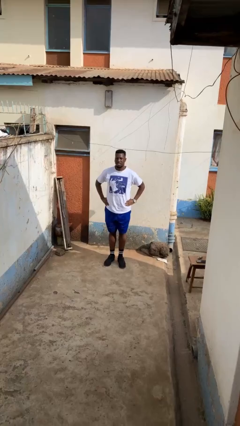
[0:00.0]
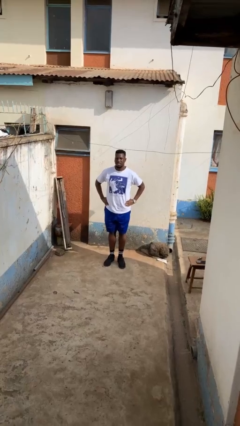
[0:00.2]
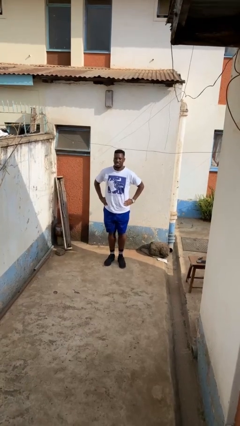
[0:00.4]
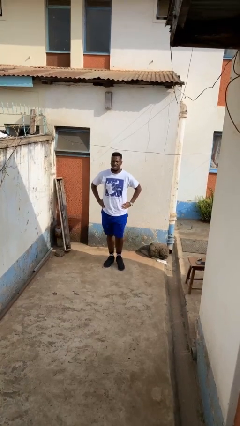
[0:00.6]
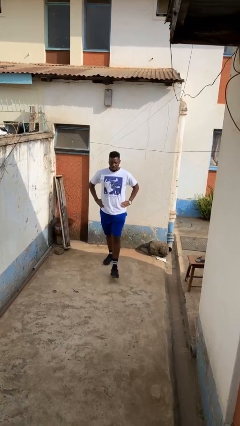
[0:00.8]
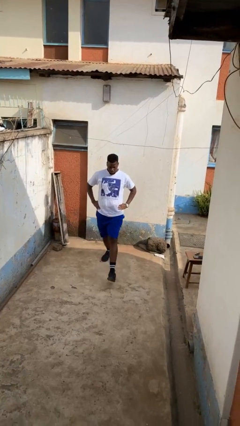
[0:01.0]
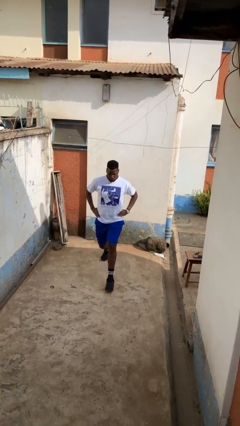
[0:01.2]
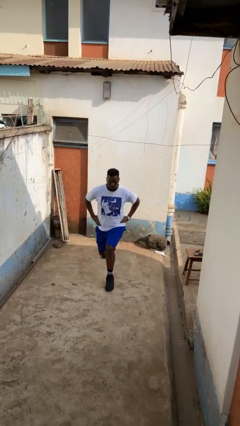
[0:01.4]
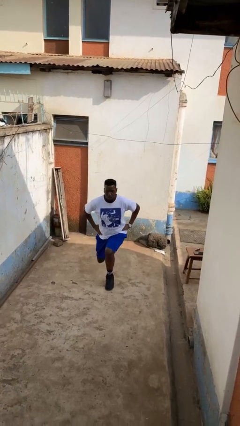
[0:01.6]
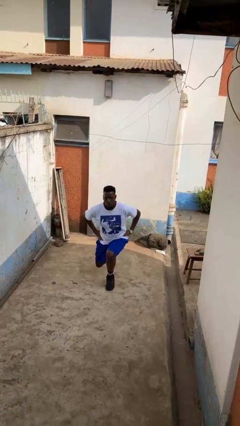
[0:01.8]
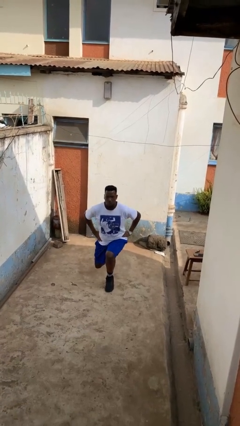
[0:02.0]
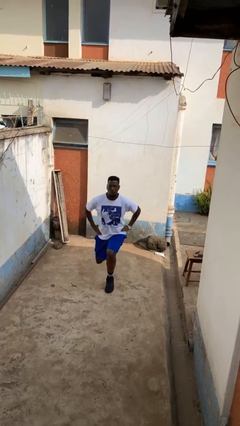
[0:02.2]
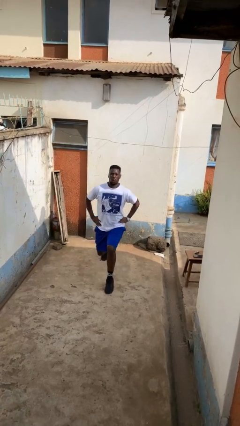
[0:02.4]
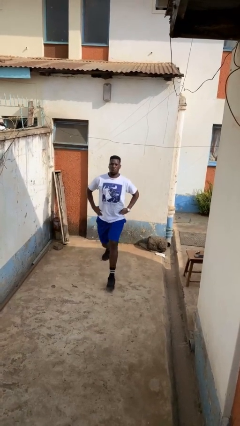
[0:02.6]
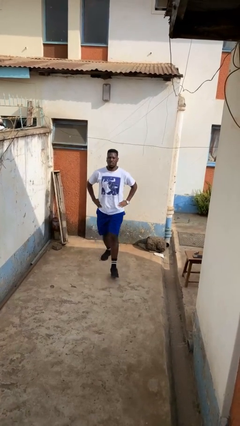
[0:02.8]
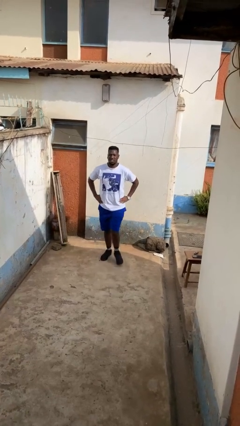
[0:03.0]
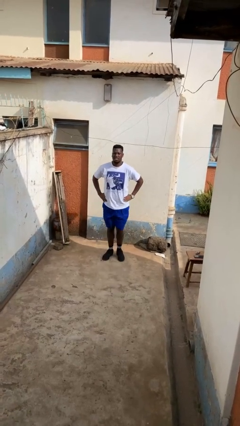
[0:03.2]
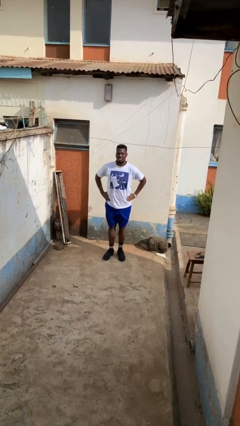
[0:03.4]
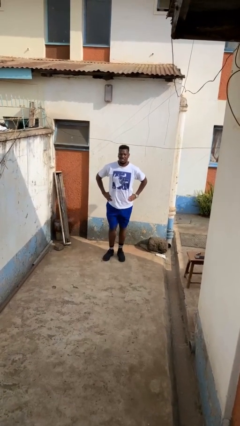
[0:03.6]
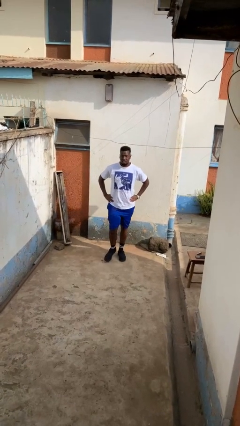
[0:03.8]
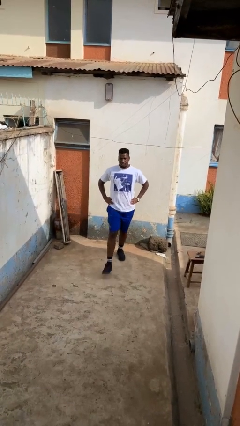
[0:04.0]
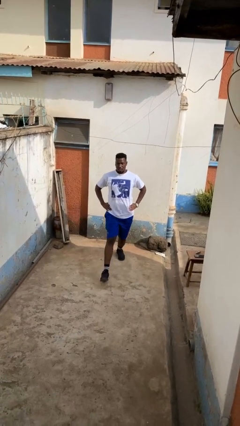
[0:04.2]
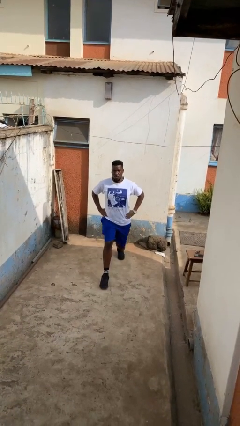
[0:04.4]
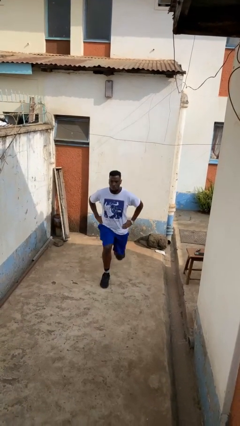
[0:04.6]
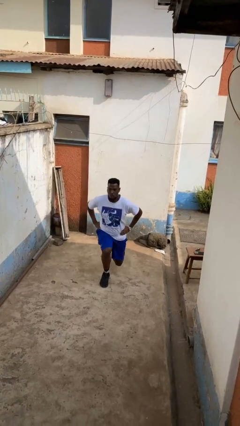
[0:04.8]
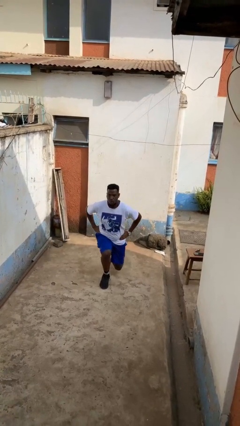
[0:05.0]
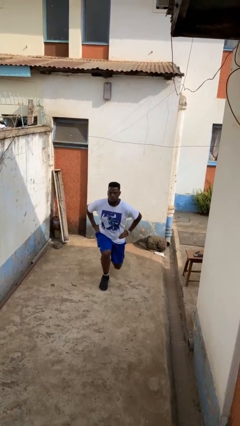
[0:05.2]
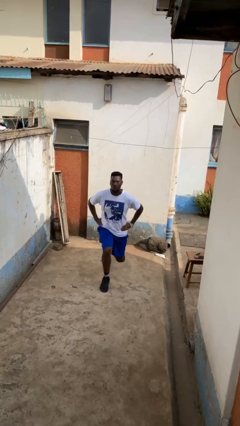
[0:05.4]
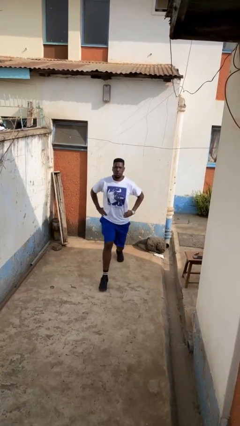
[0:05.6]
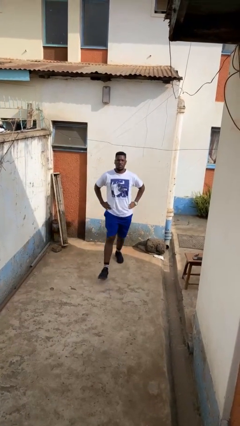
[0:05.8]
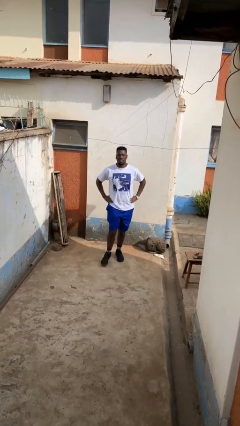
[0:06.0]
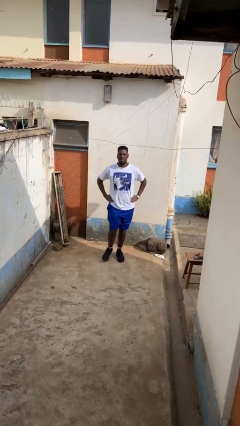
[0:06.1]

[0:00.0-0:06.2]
person exercises with lunges

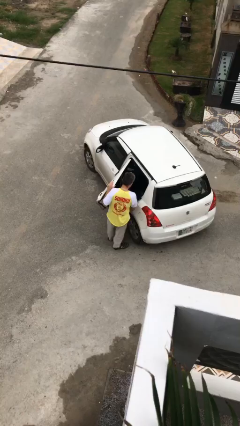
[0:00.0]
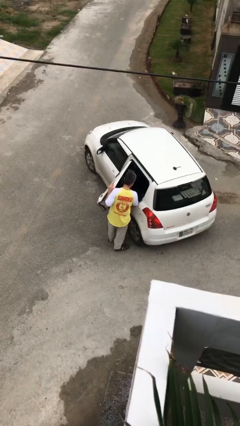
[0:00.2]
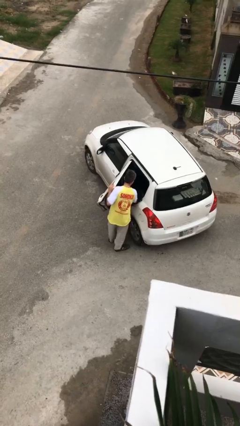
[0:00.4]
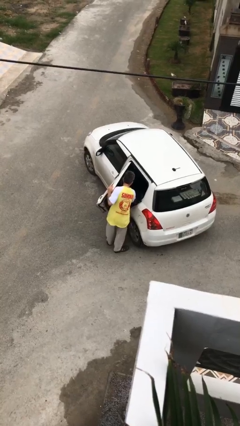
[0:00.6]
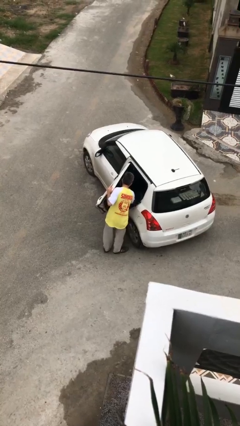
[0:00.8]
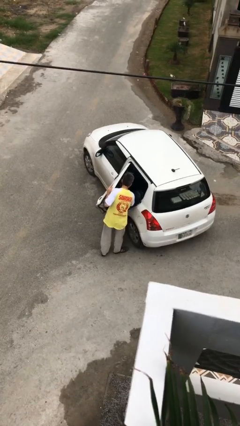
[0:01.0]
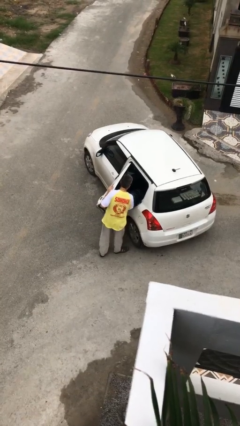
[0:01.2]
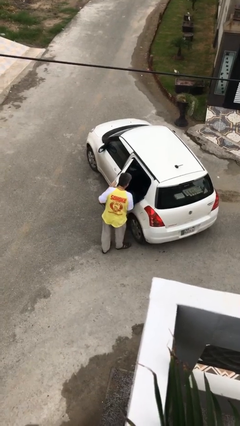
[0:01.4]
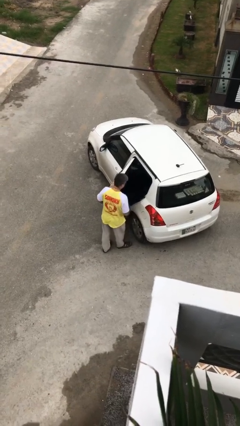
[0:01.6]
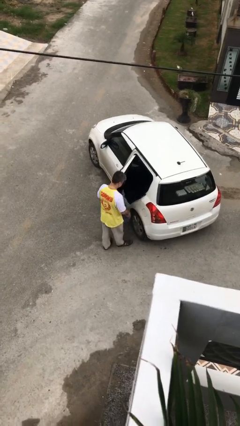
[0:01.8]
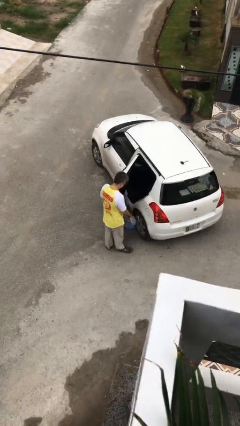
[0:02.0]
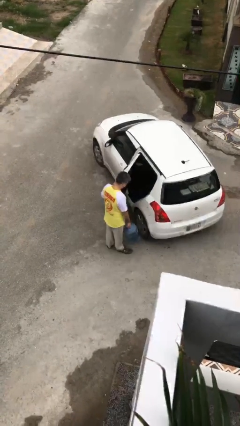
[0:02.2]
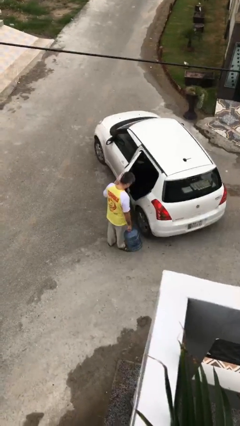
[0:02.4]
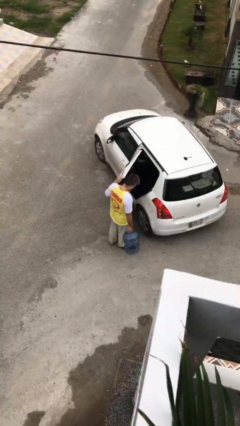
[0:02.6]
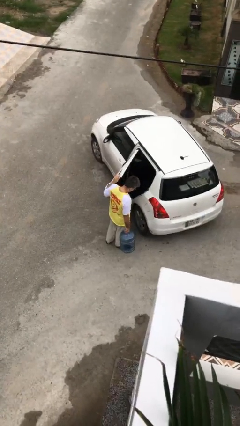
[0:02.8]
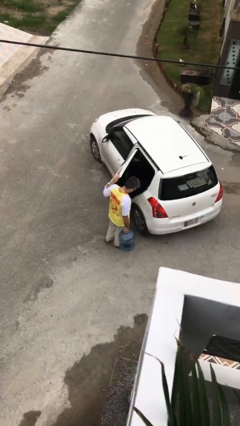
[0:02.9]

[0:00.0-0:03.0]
person unloads car

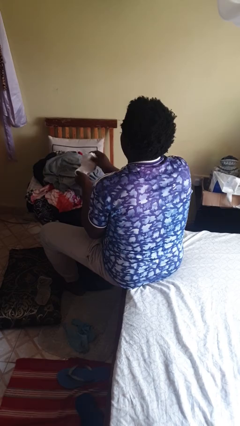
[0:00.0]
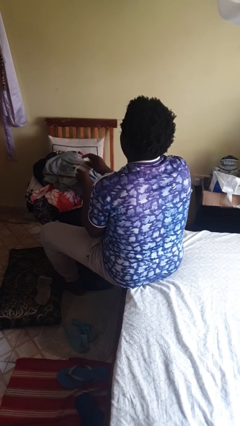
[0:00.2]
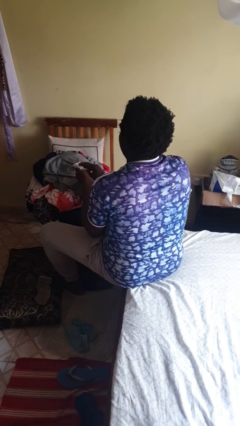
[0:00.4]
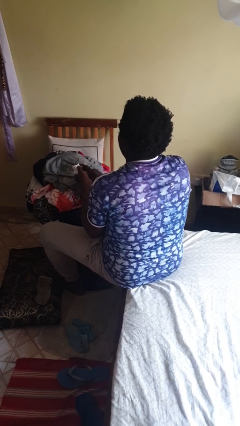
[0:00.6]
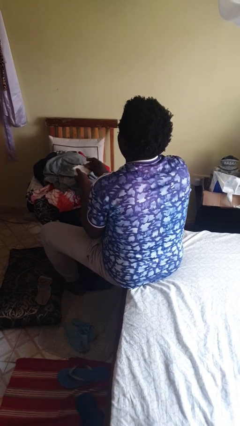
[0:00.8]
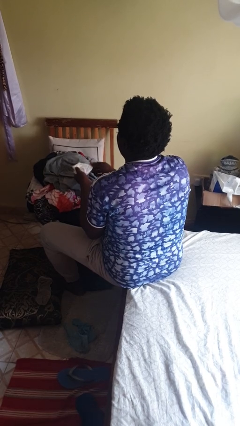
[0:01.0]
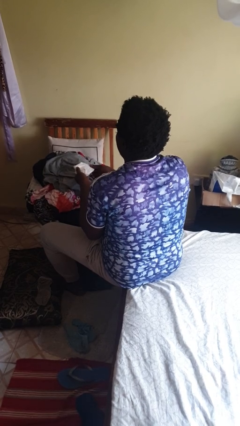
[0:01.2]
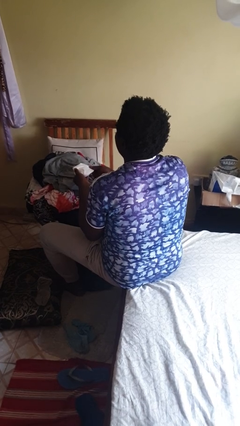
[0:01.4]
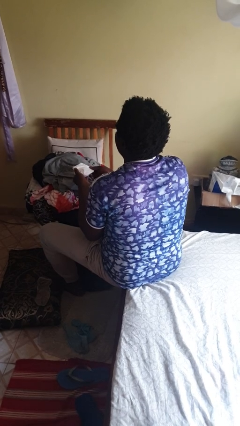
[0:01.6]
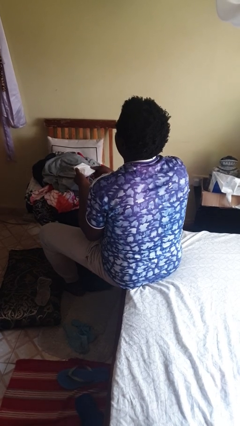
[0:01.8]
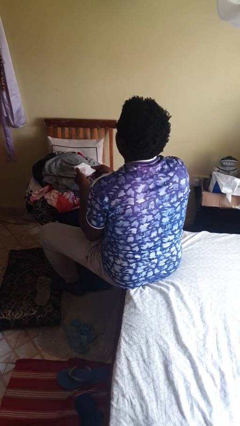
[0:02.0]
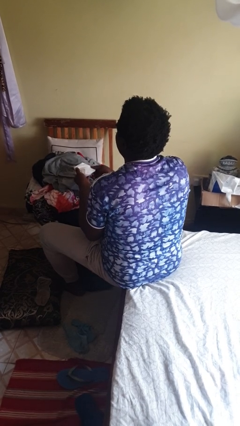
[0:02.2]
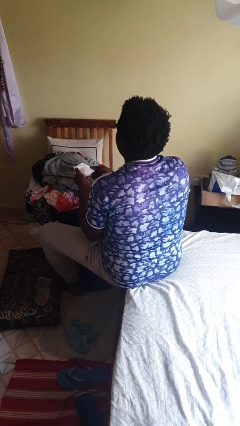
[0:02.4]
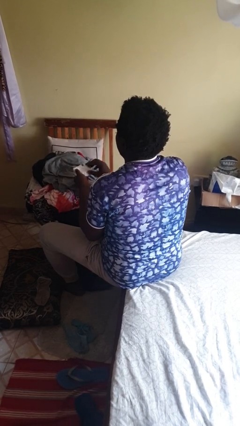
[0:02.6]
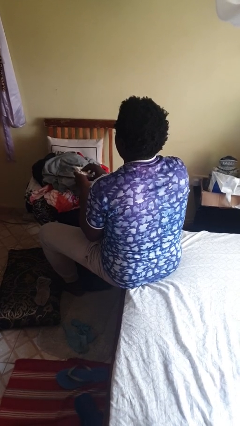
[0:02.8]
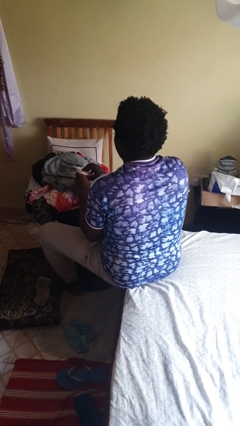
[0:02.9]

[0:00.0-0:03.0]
person folds socks

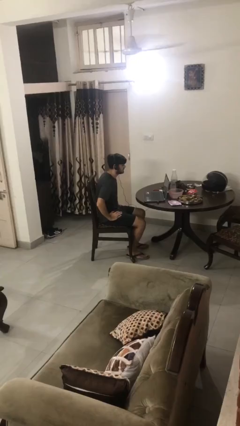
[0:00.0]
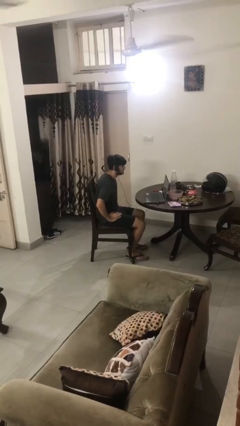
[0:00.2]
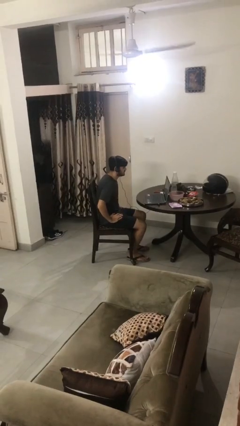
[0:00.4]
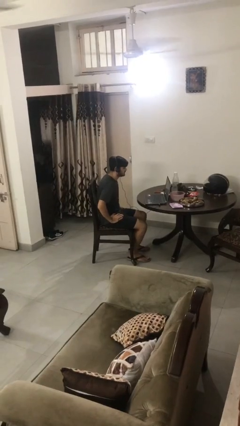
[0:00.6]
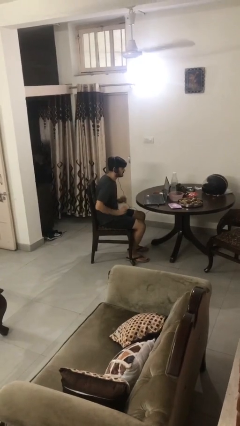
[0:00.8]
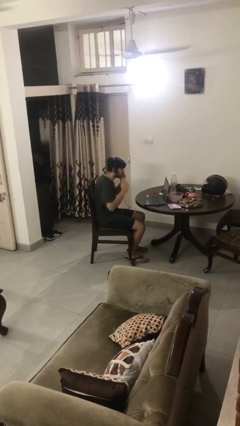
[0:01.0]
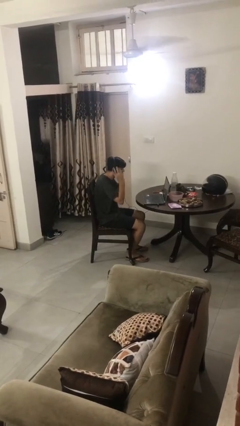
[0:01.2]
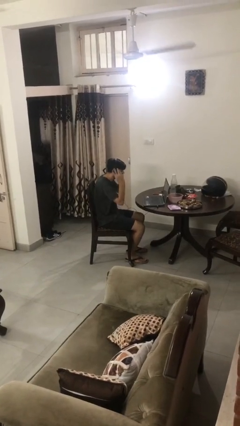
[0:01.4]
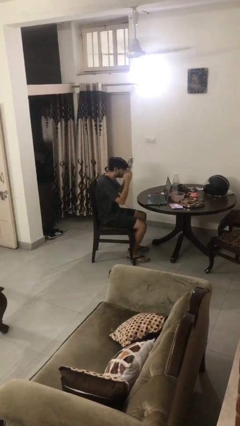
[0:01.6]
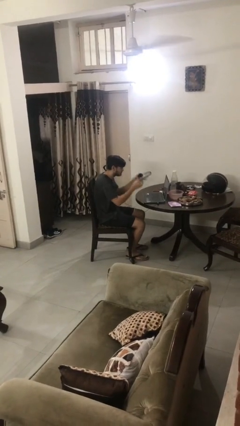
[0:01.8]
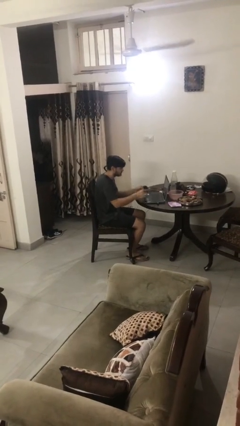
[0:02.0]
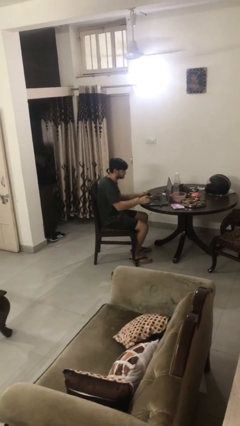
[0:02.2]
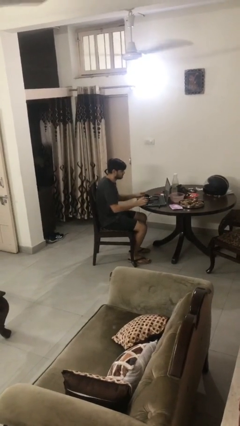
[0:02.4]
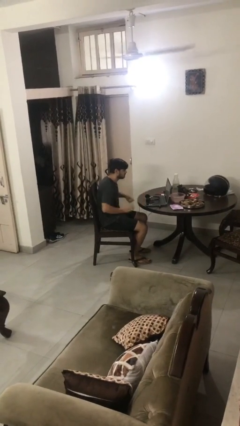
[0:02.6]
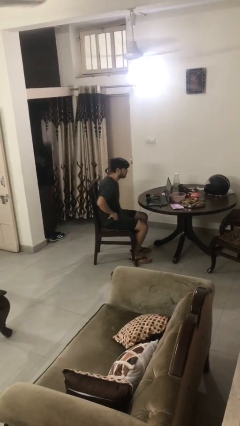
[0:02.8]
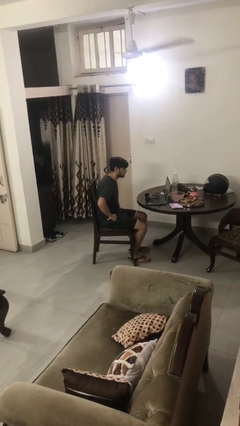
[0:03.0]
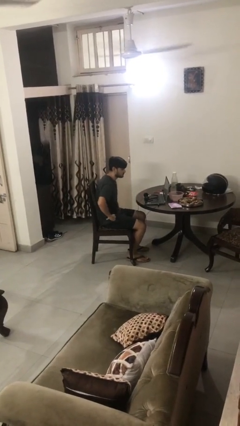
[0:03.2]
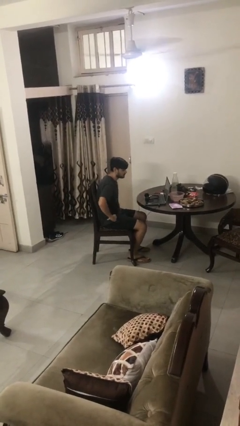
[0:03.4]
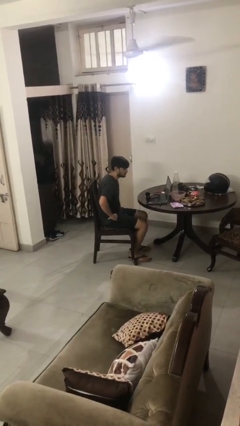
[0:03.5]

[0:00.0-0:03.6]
person takes off headphones

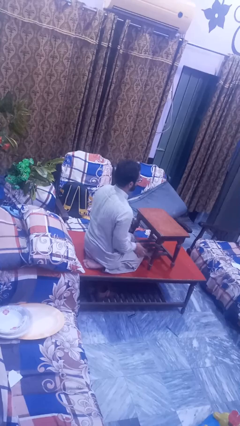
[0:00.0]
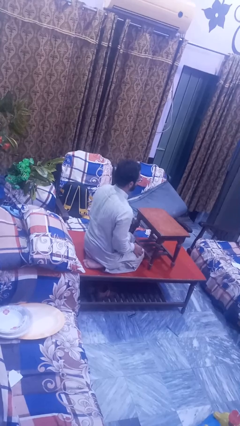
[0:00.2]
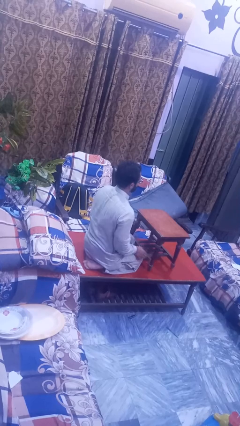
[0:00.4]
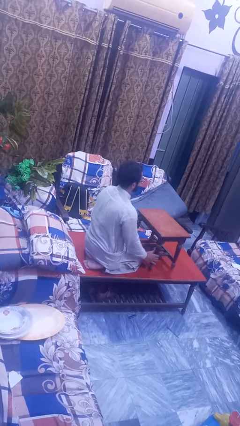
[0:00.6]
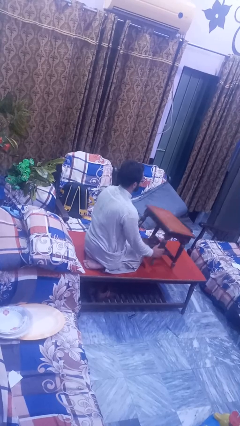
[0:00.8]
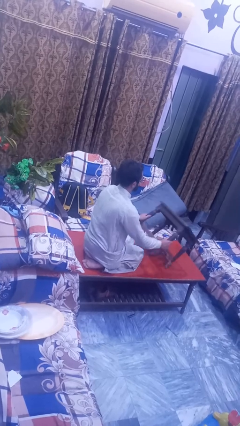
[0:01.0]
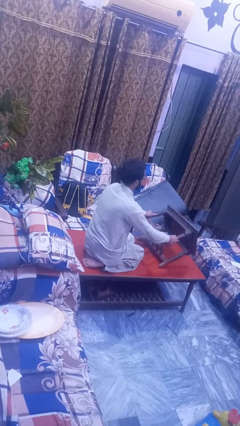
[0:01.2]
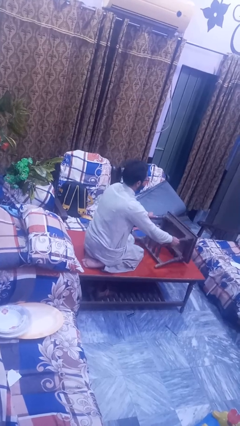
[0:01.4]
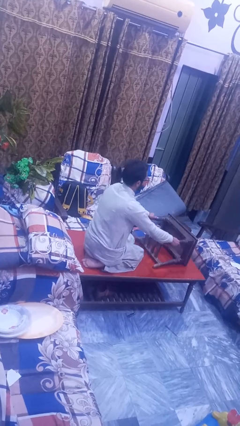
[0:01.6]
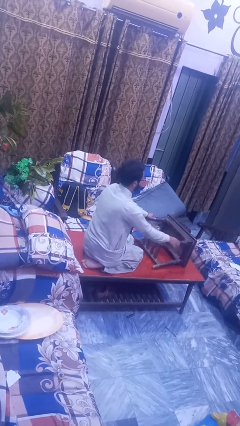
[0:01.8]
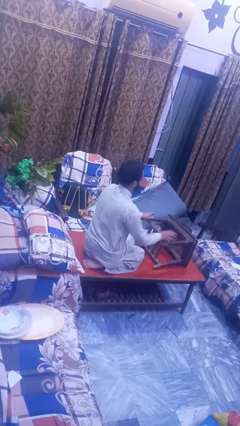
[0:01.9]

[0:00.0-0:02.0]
person knocks over furniture

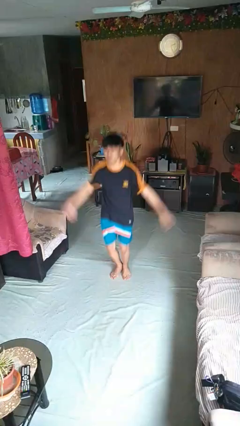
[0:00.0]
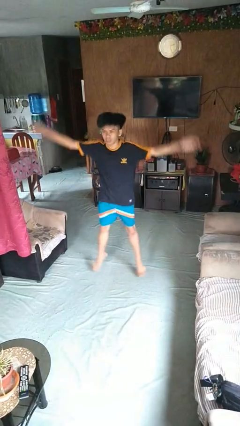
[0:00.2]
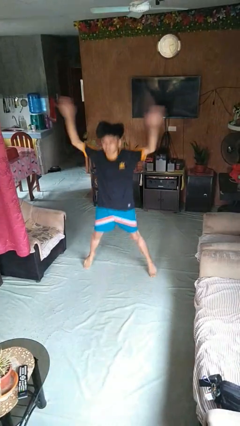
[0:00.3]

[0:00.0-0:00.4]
person exercises with jumping jacks
